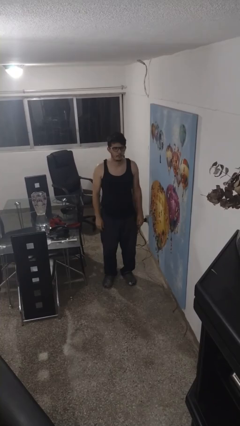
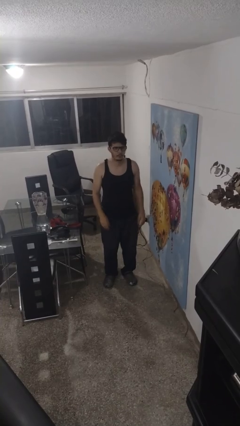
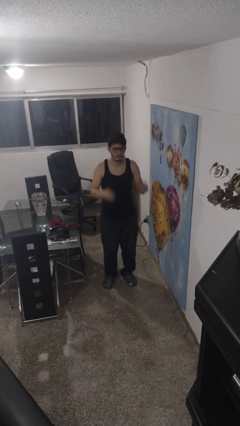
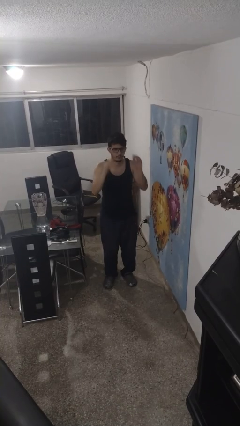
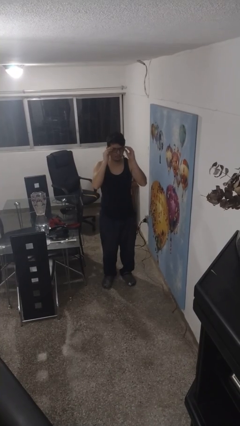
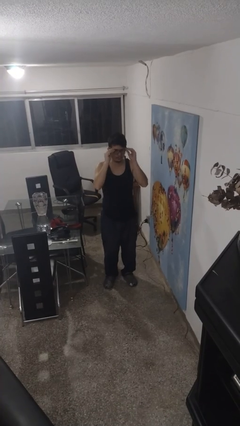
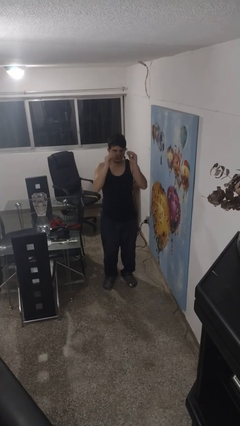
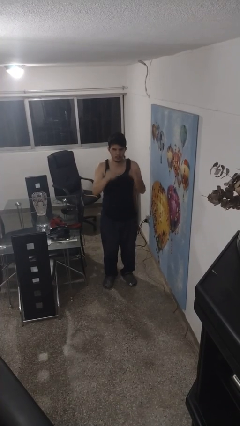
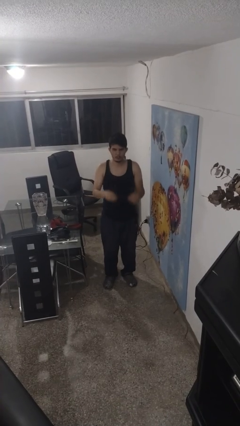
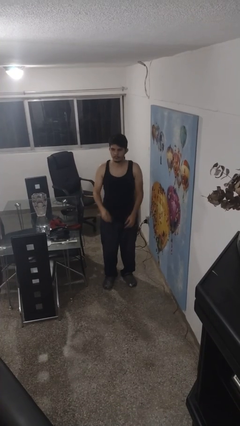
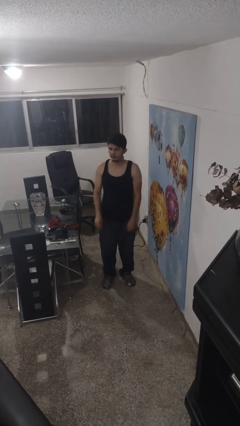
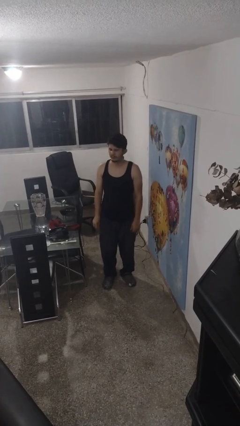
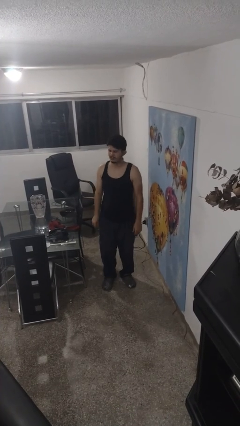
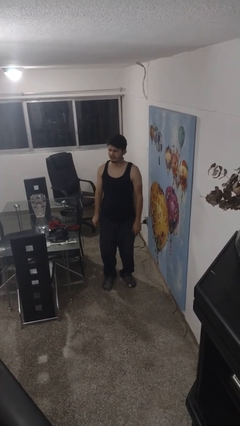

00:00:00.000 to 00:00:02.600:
person takes off glasses

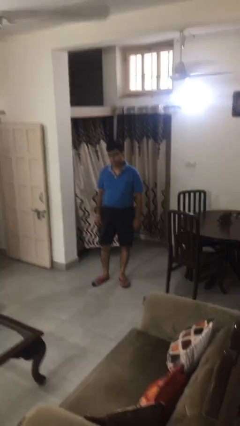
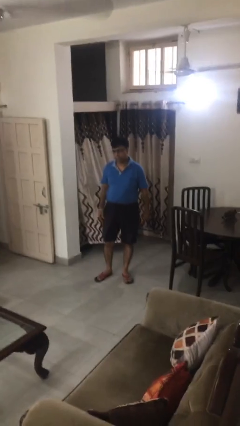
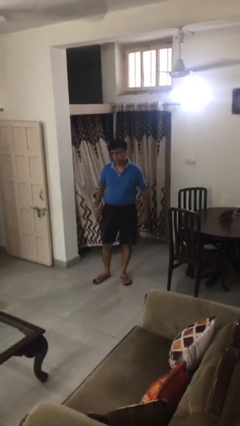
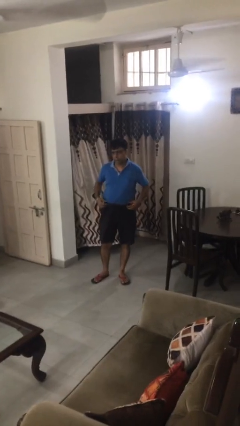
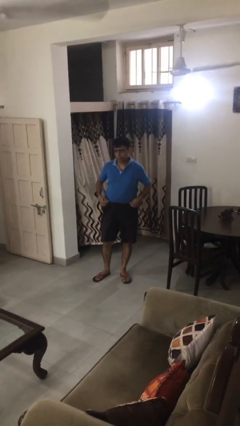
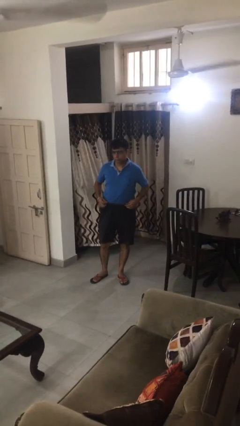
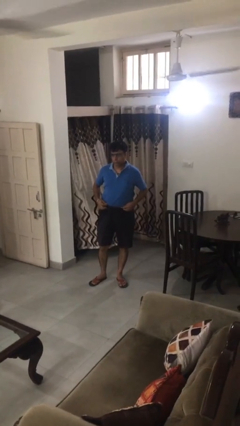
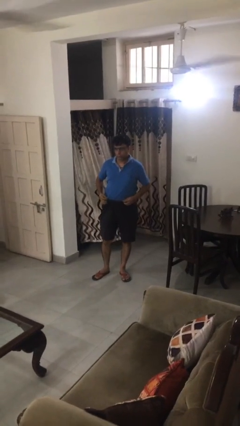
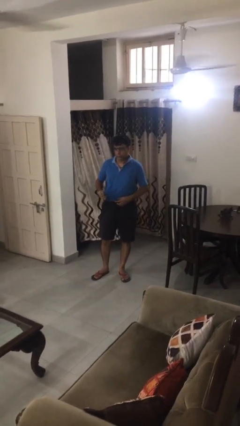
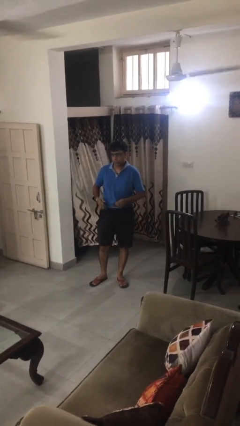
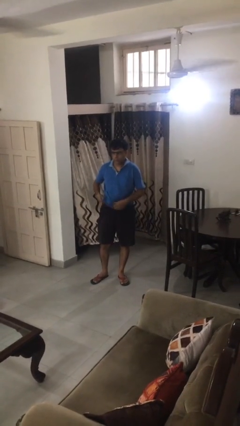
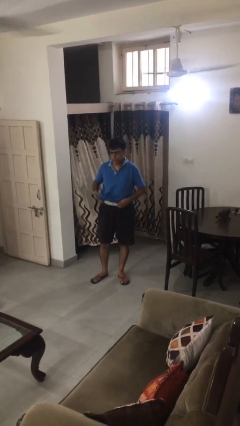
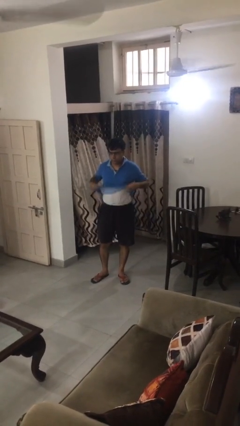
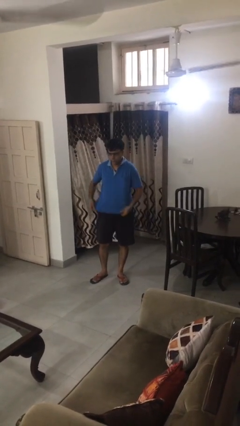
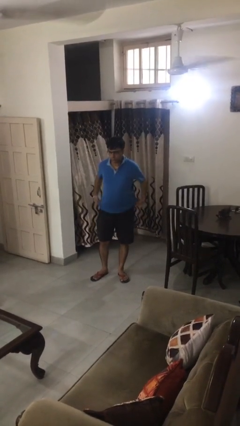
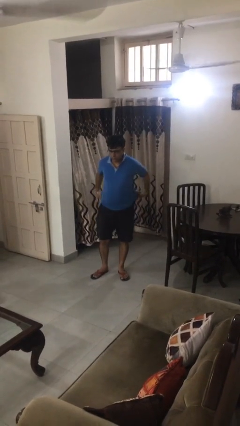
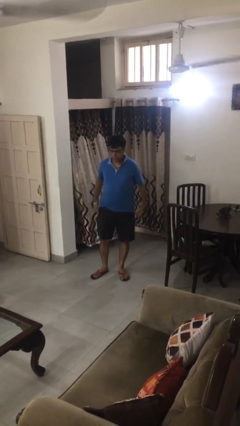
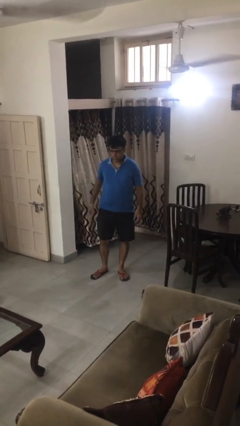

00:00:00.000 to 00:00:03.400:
person untucks shirt

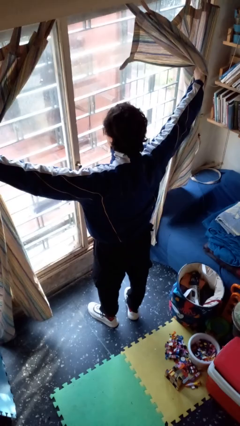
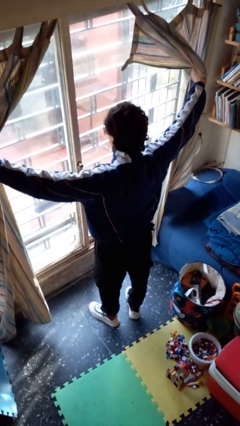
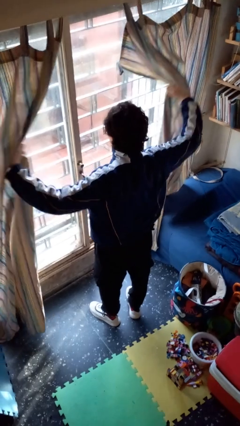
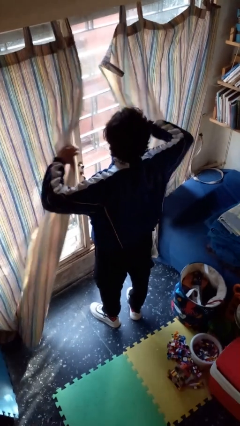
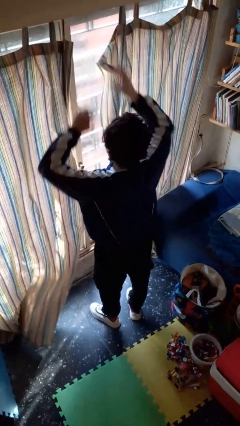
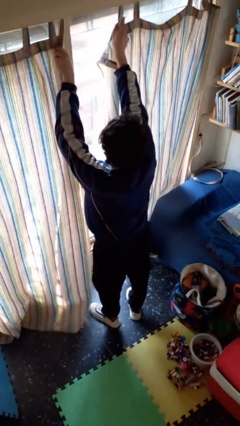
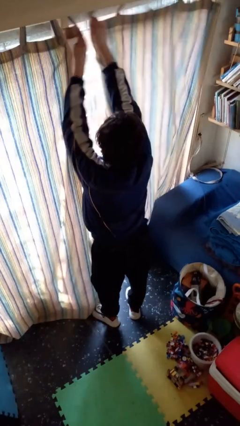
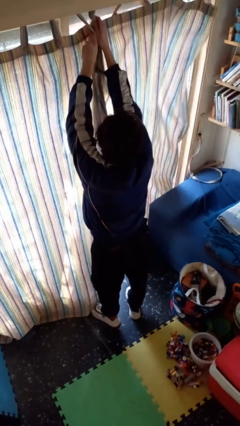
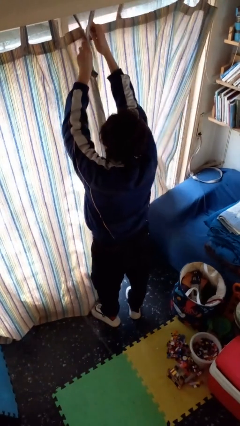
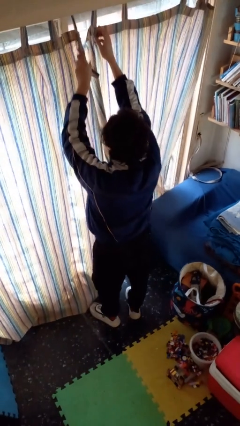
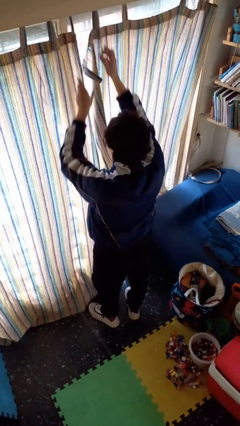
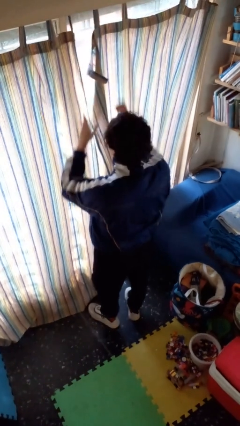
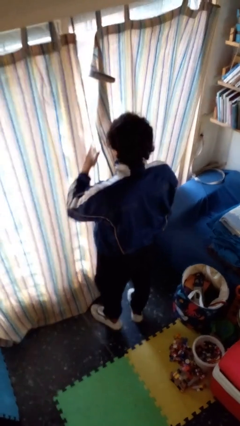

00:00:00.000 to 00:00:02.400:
person closes curtains

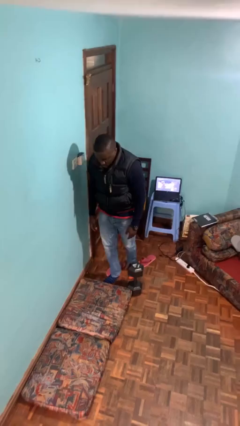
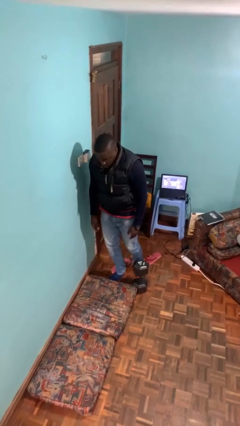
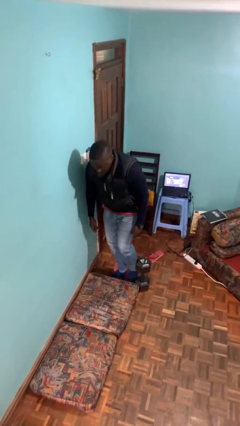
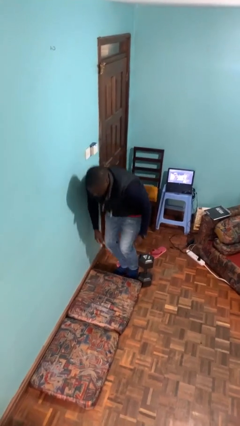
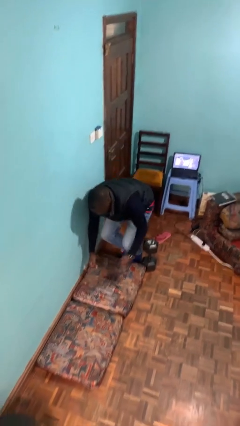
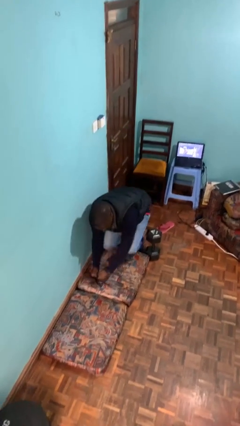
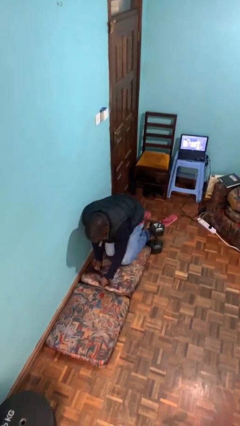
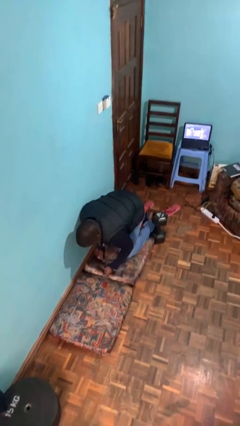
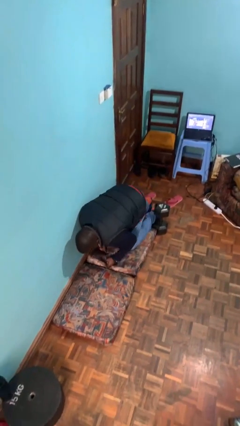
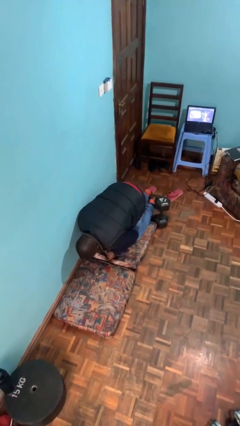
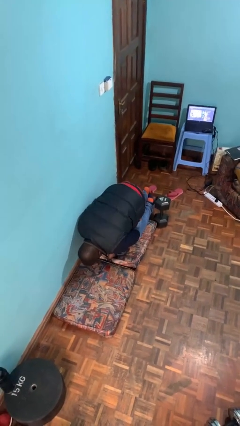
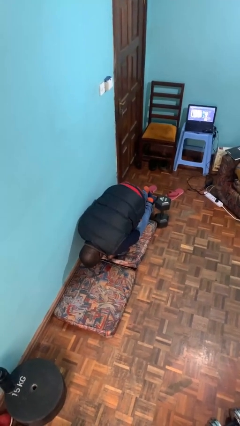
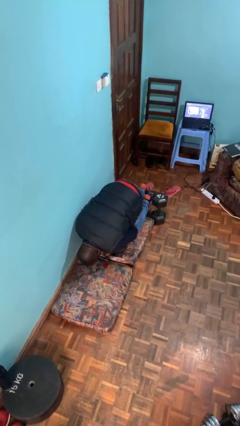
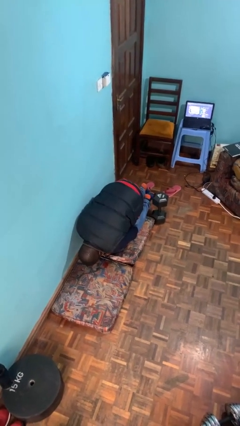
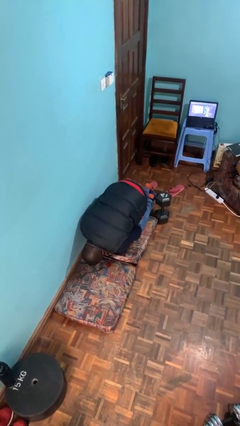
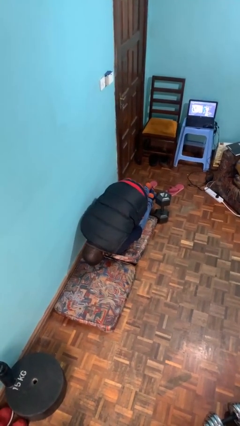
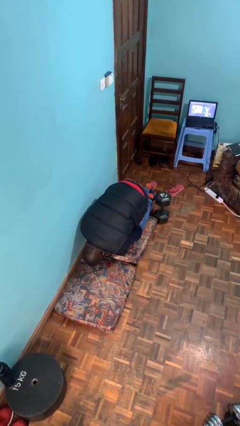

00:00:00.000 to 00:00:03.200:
person trips on object on floor

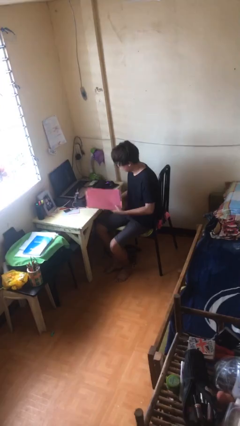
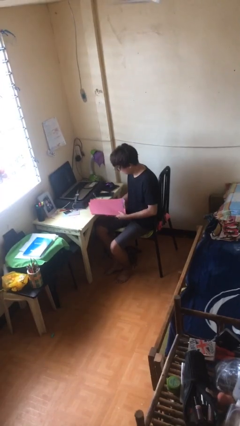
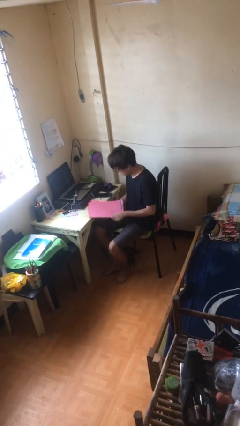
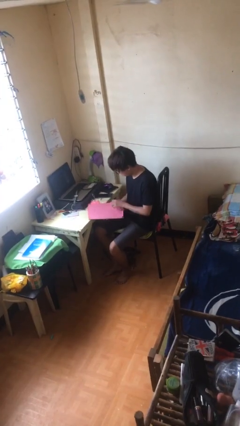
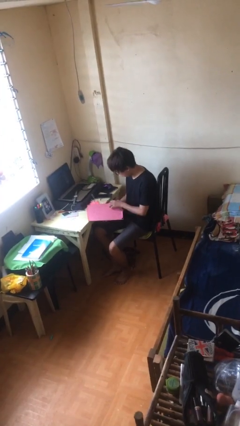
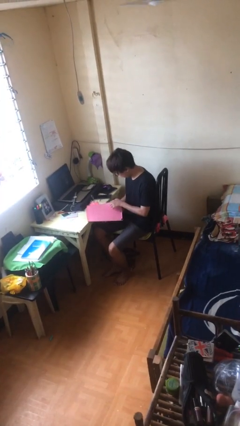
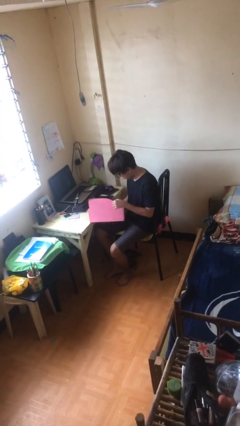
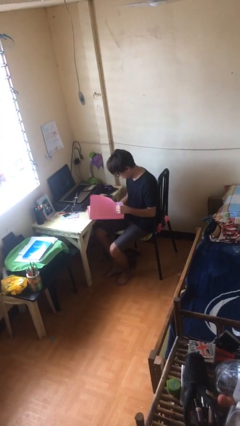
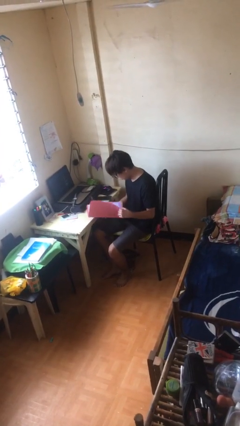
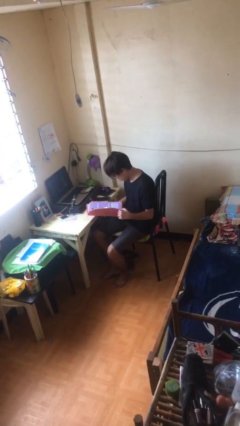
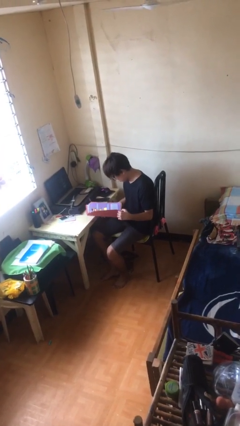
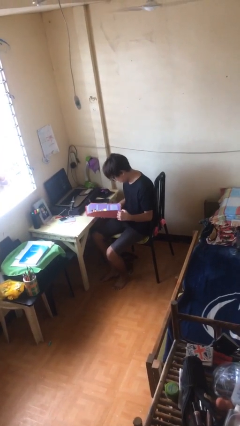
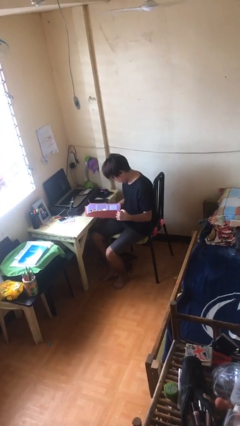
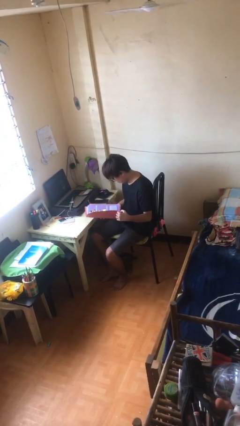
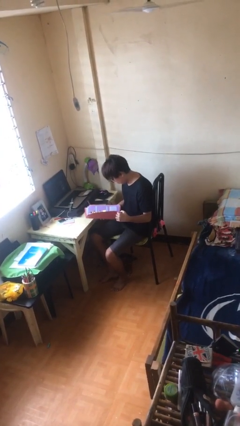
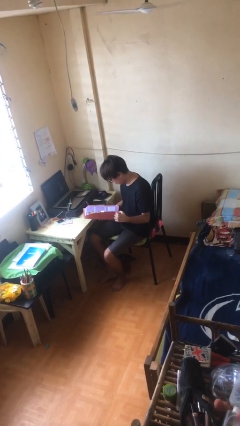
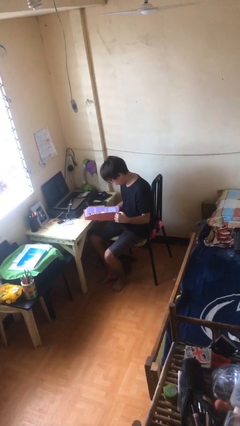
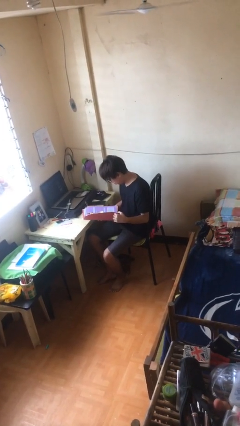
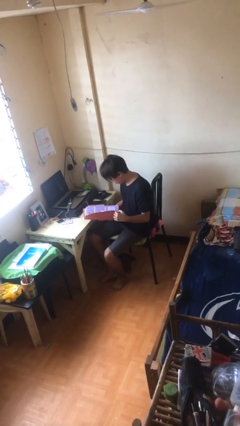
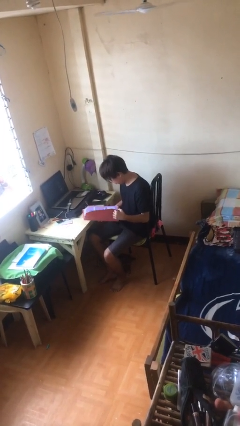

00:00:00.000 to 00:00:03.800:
person reads document

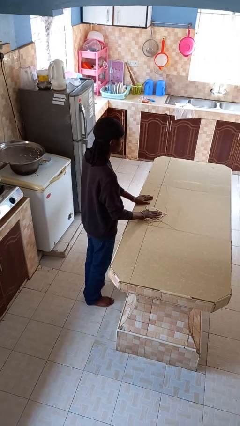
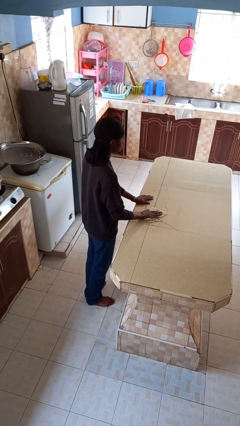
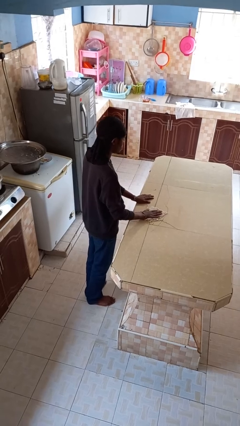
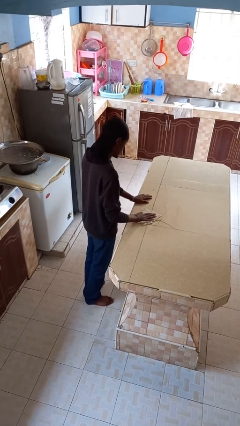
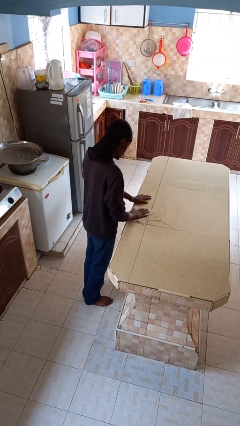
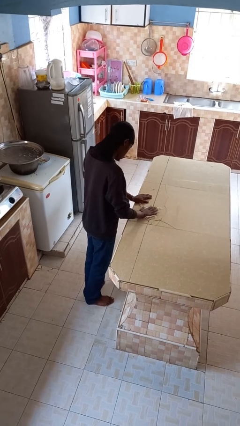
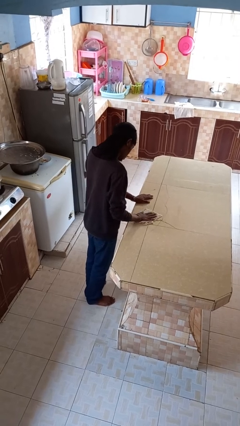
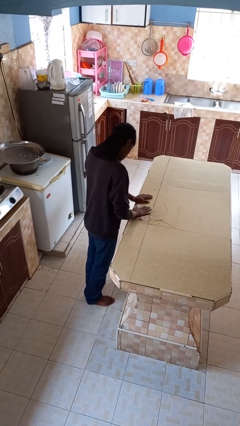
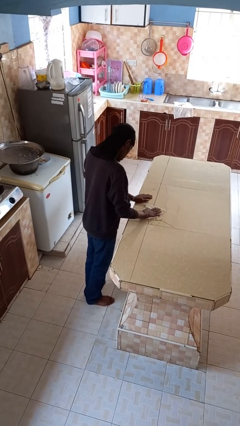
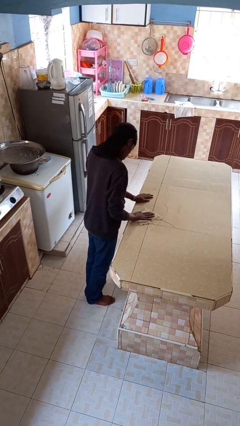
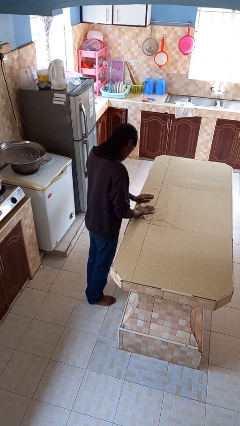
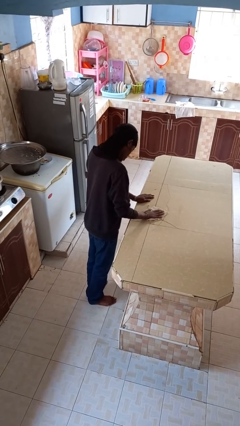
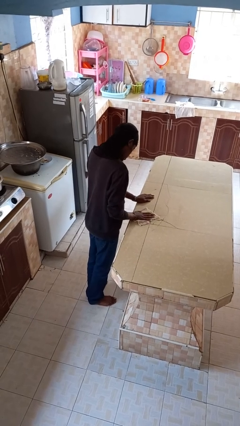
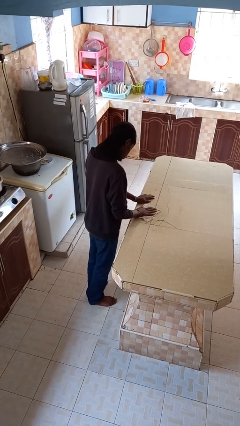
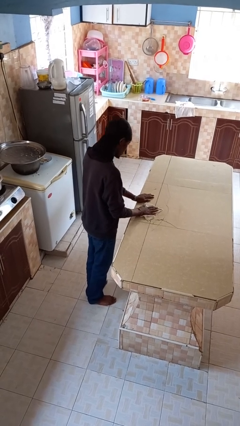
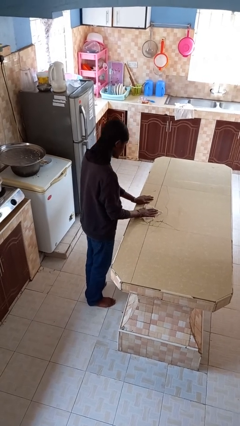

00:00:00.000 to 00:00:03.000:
person cleans table with rag
